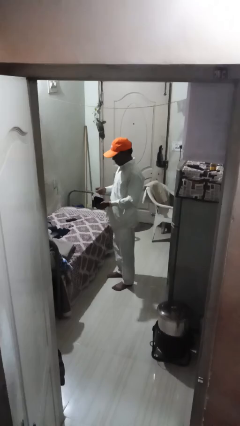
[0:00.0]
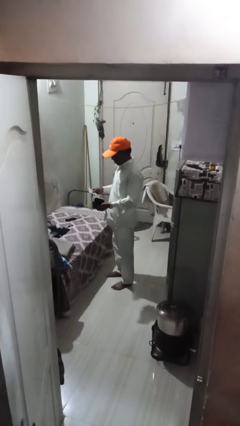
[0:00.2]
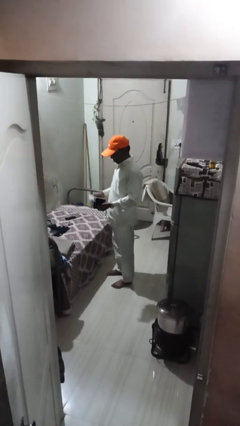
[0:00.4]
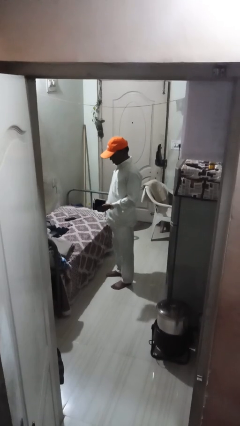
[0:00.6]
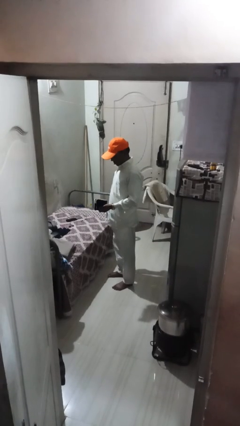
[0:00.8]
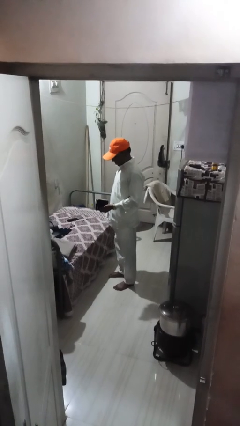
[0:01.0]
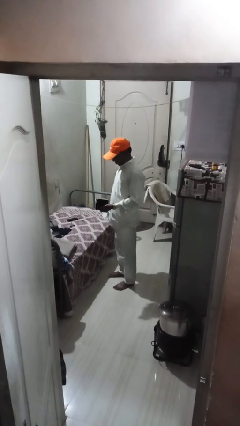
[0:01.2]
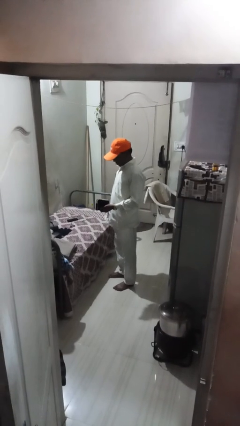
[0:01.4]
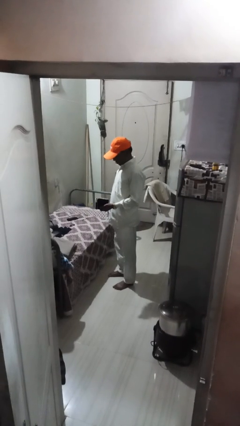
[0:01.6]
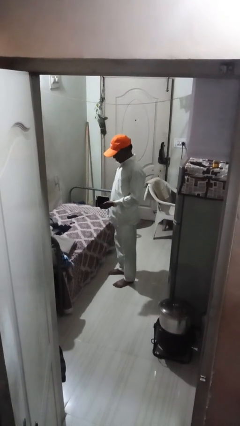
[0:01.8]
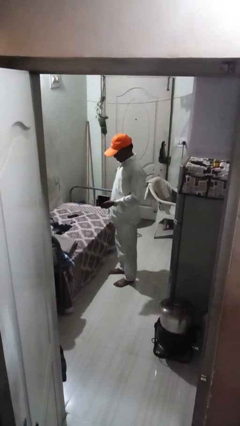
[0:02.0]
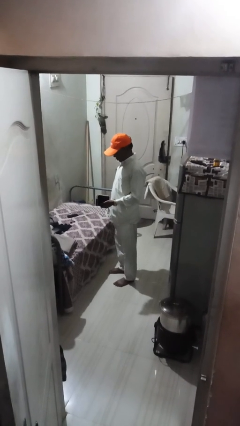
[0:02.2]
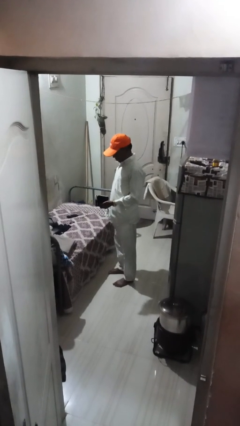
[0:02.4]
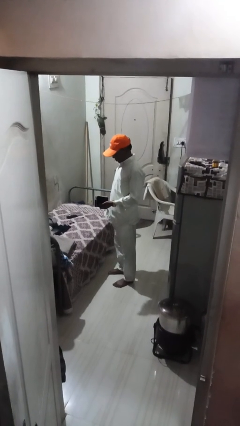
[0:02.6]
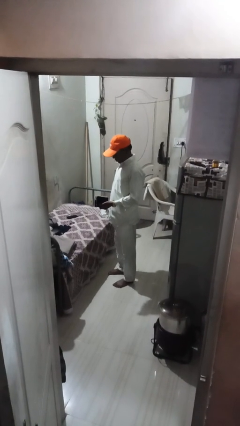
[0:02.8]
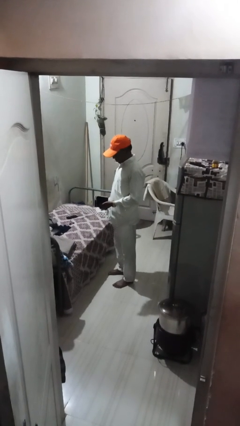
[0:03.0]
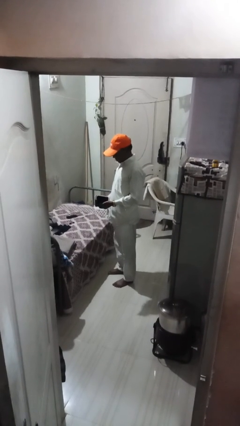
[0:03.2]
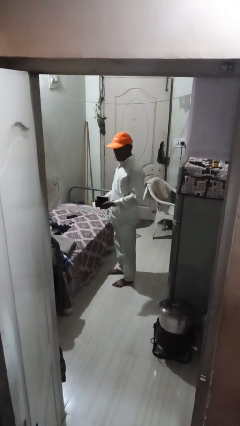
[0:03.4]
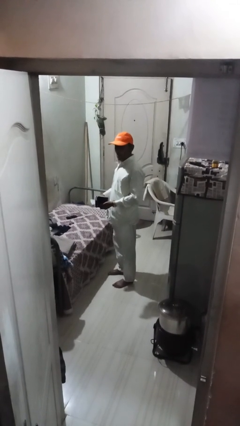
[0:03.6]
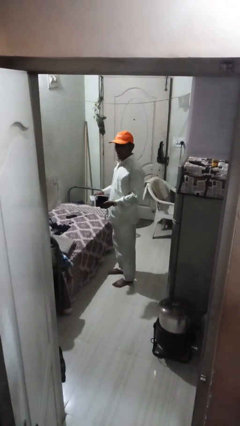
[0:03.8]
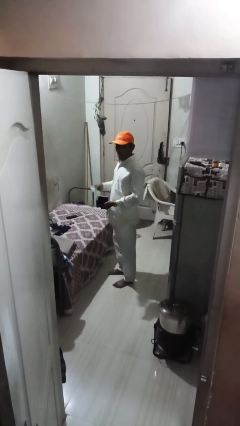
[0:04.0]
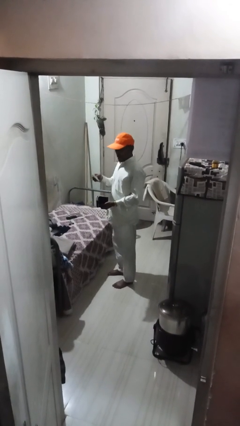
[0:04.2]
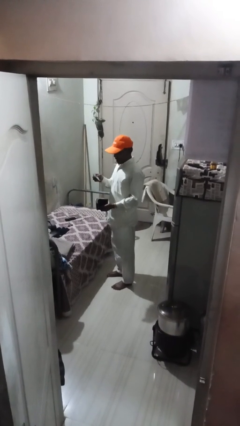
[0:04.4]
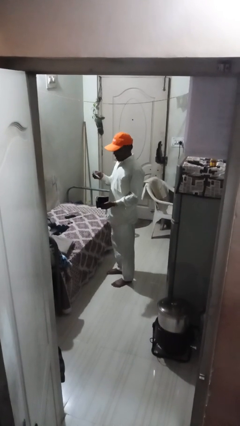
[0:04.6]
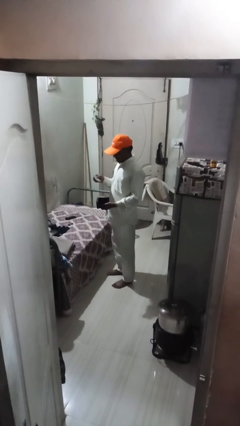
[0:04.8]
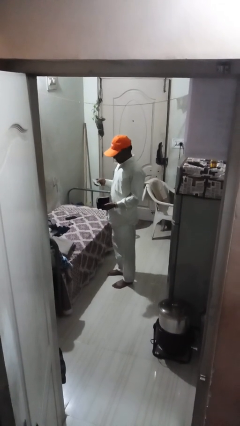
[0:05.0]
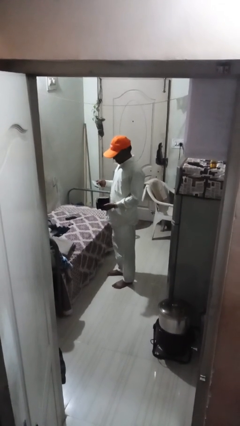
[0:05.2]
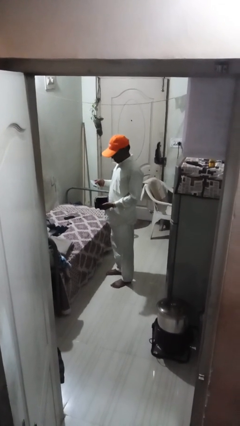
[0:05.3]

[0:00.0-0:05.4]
person takes object from purse

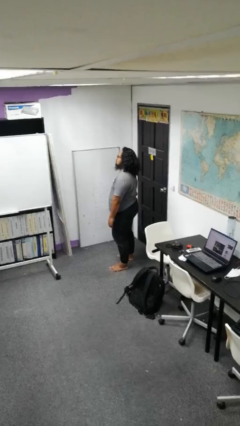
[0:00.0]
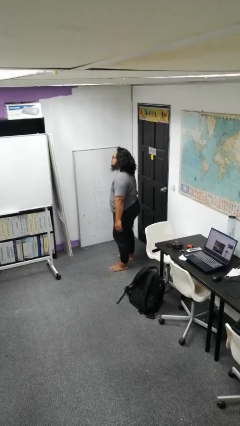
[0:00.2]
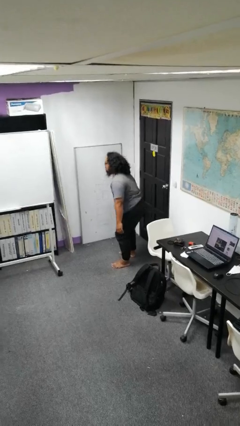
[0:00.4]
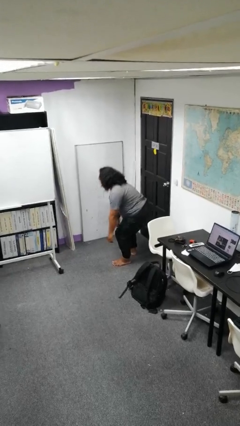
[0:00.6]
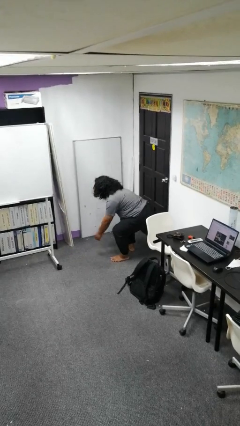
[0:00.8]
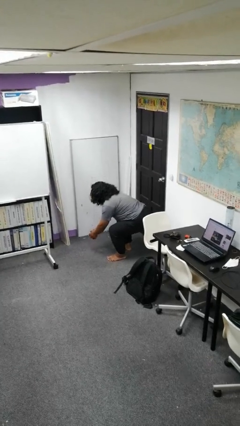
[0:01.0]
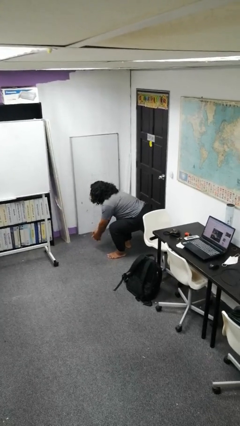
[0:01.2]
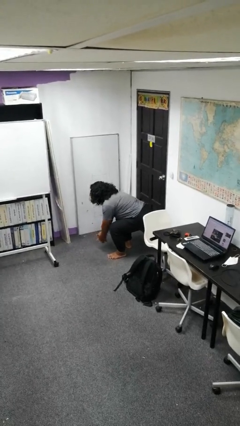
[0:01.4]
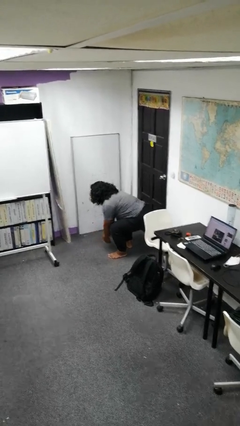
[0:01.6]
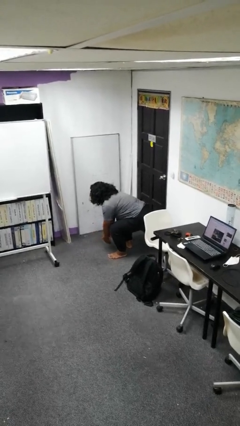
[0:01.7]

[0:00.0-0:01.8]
person squats

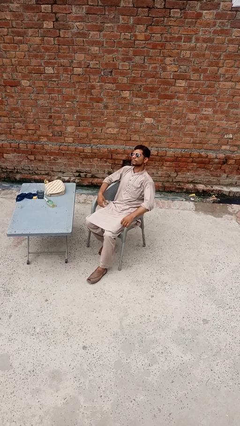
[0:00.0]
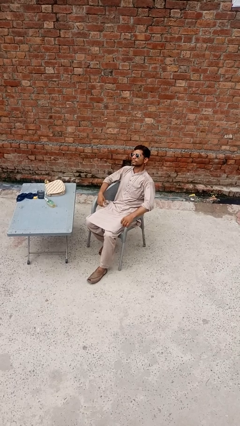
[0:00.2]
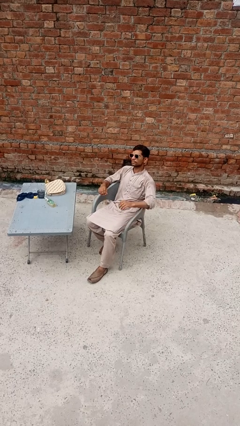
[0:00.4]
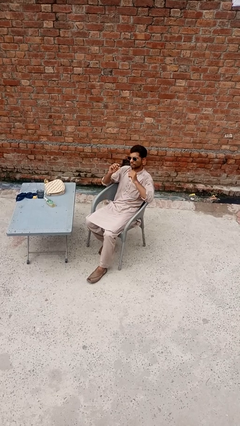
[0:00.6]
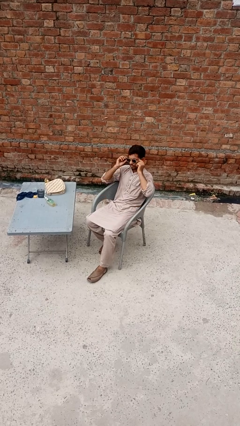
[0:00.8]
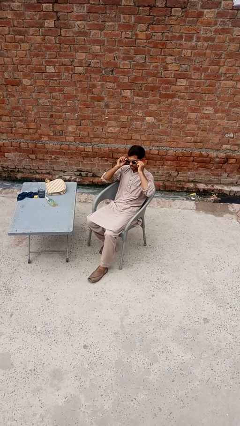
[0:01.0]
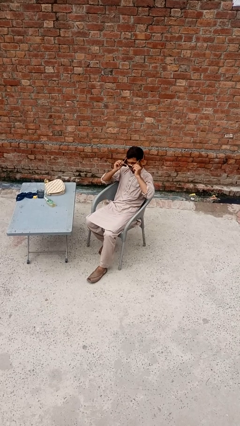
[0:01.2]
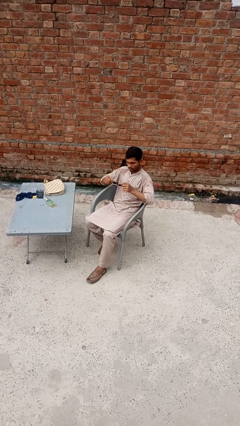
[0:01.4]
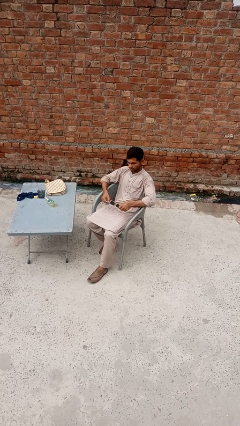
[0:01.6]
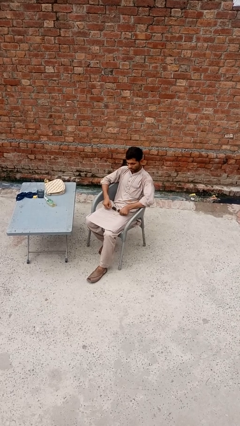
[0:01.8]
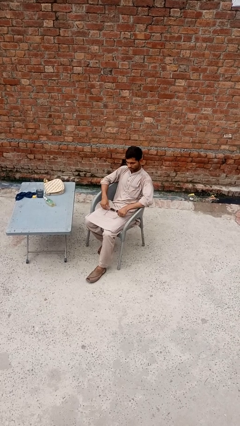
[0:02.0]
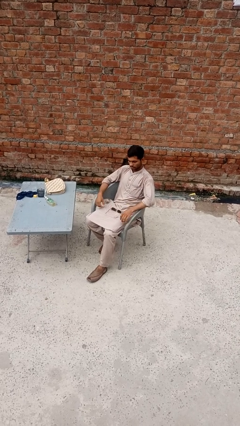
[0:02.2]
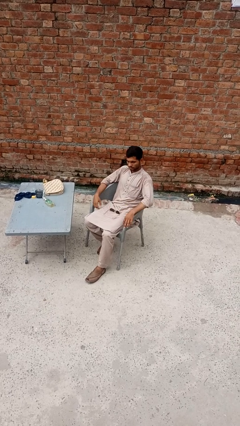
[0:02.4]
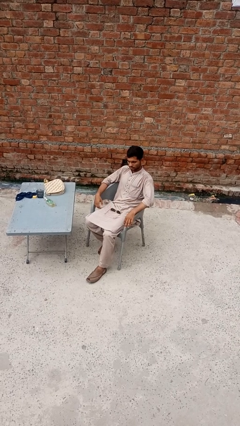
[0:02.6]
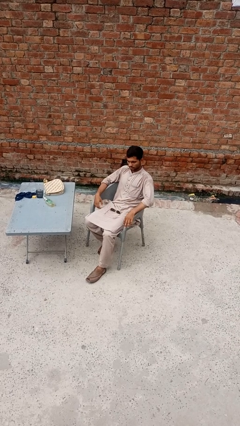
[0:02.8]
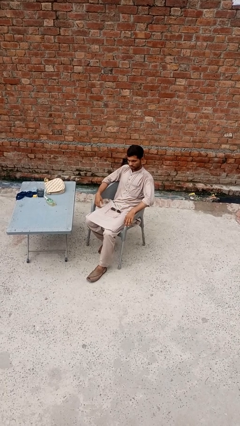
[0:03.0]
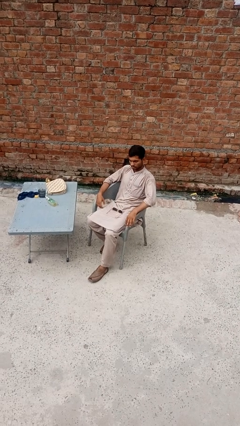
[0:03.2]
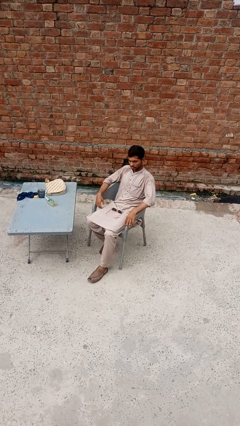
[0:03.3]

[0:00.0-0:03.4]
person takes off sunglasses

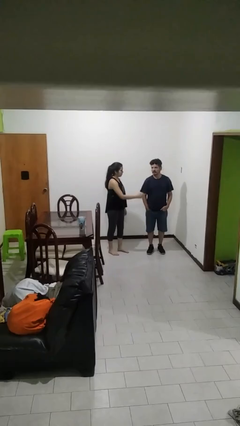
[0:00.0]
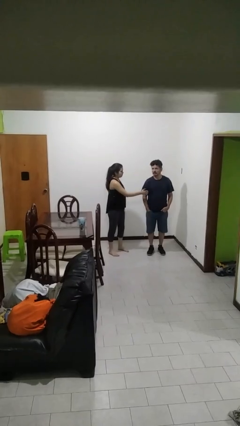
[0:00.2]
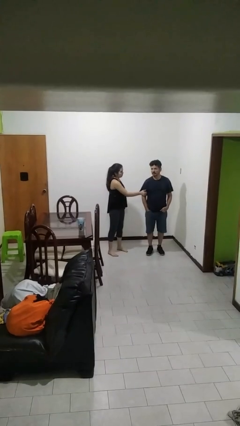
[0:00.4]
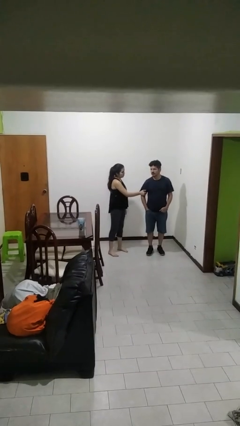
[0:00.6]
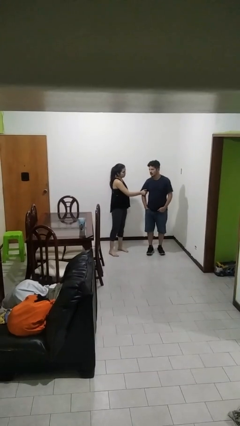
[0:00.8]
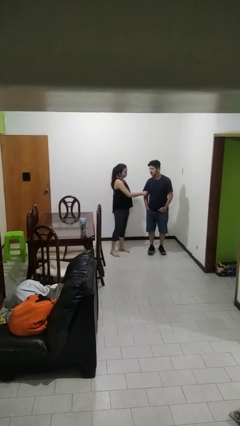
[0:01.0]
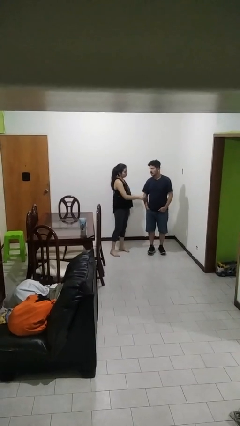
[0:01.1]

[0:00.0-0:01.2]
person grabs person by bicep

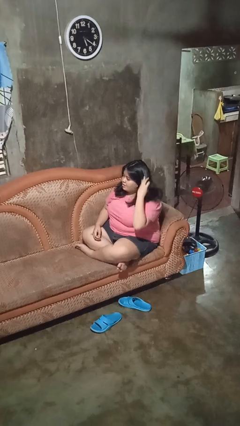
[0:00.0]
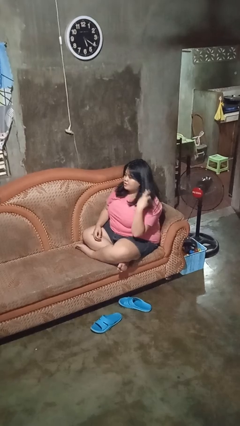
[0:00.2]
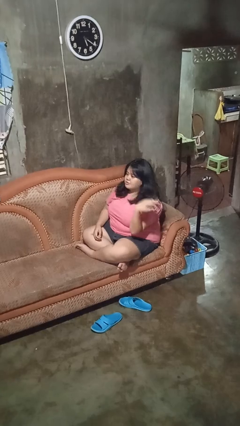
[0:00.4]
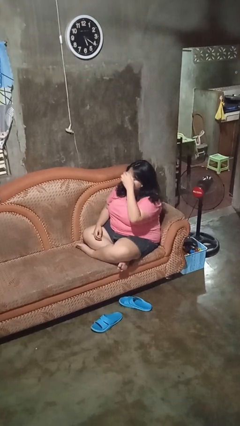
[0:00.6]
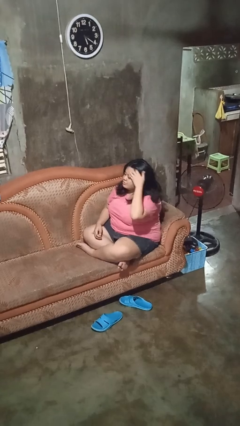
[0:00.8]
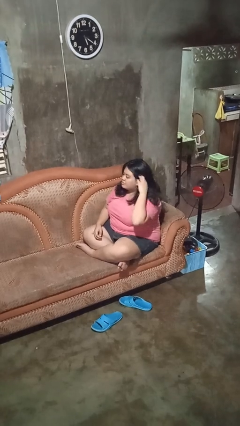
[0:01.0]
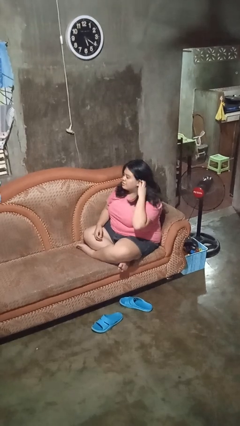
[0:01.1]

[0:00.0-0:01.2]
person strokes hair

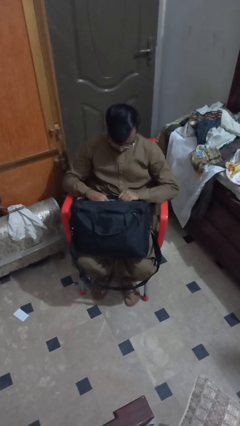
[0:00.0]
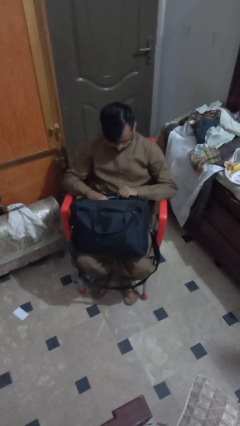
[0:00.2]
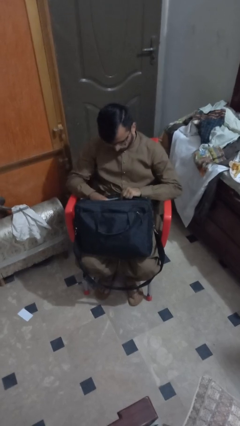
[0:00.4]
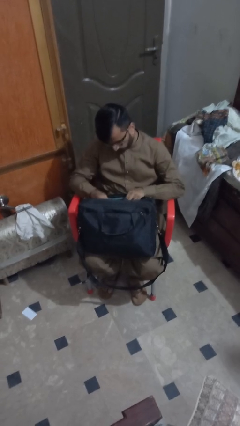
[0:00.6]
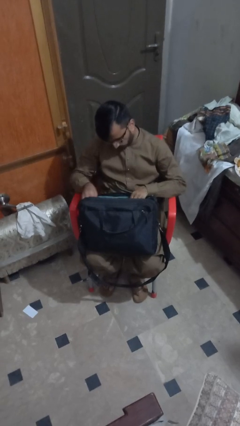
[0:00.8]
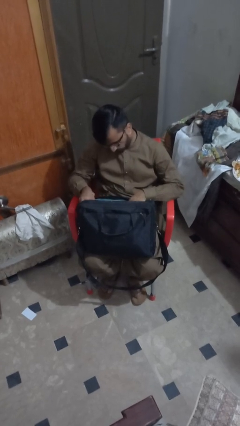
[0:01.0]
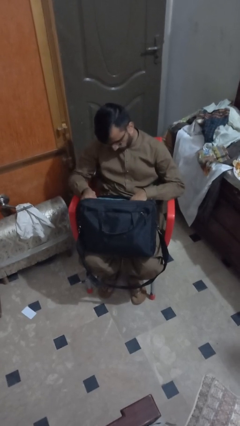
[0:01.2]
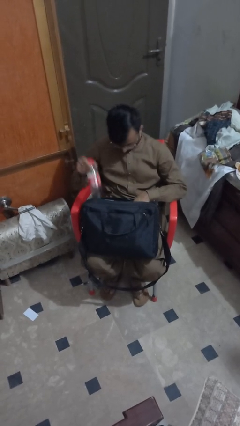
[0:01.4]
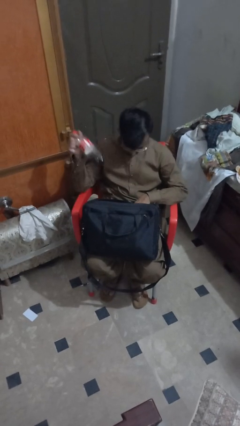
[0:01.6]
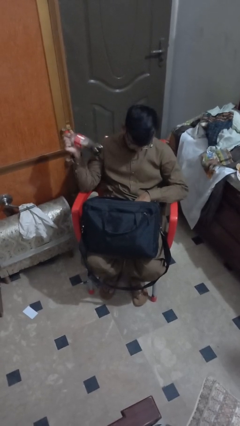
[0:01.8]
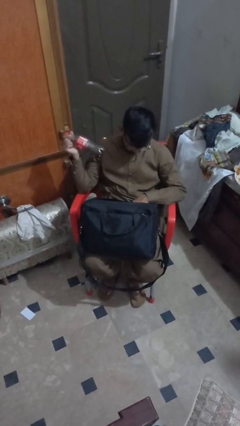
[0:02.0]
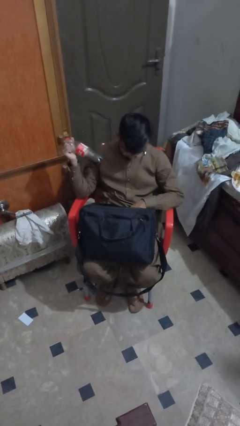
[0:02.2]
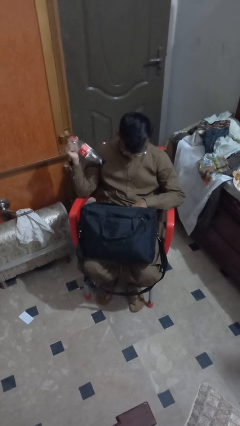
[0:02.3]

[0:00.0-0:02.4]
person takes object from bag

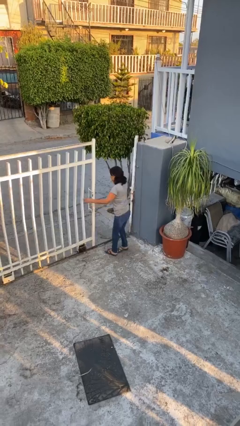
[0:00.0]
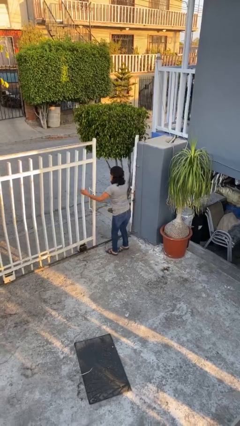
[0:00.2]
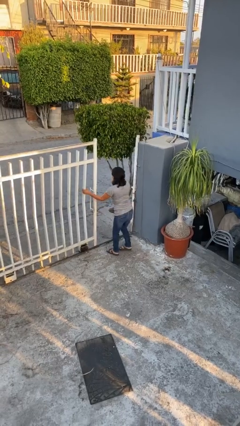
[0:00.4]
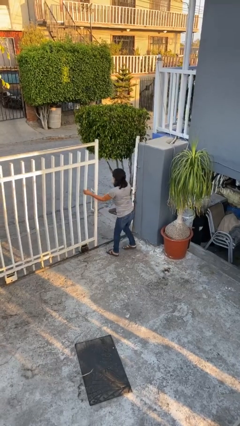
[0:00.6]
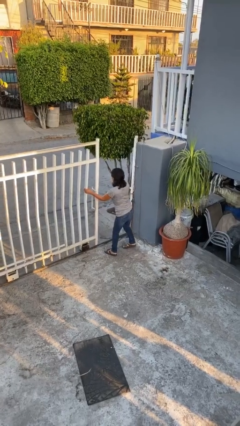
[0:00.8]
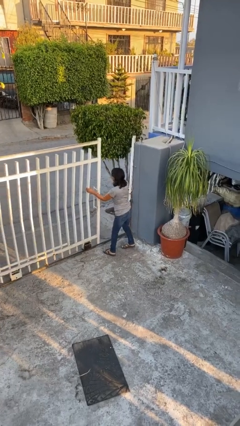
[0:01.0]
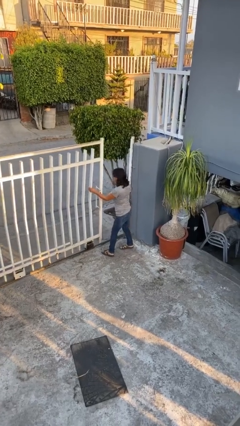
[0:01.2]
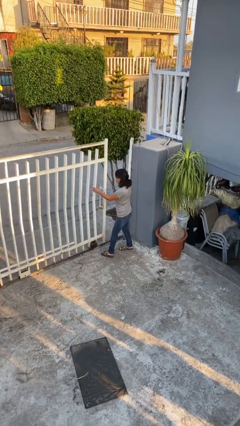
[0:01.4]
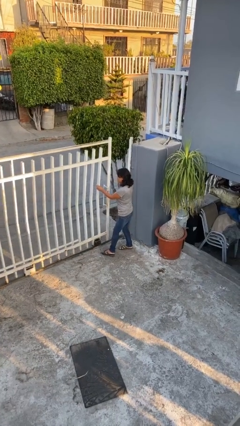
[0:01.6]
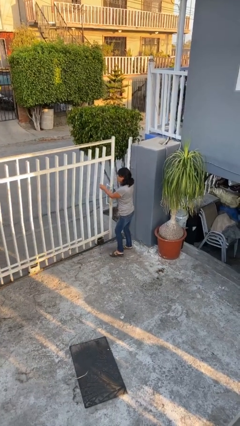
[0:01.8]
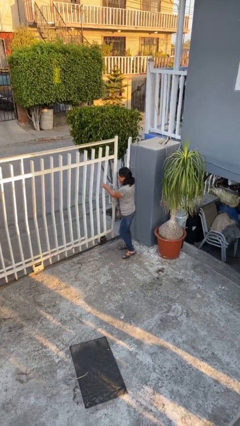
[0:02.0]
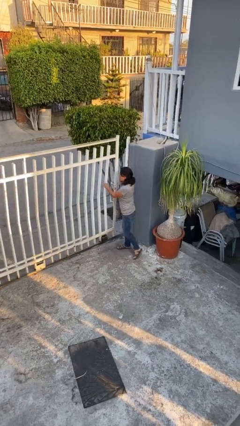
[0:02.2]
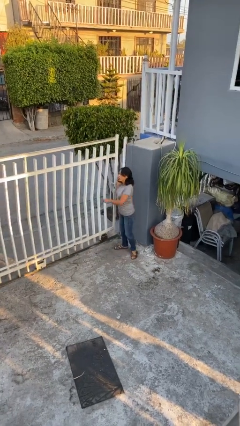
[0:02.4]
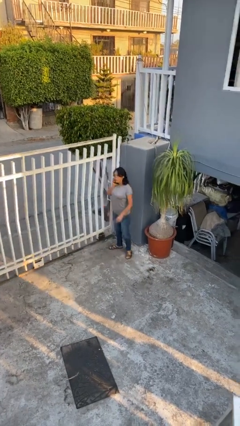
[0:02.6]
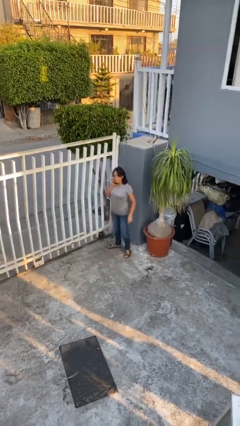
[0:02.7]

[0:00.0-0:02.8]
person closes facility door
